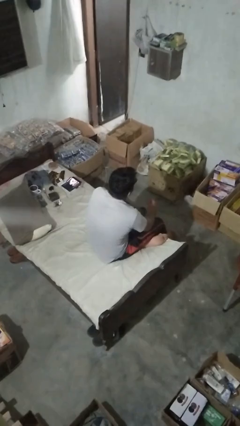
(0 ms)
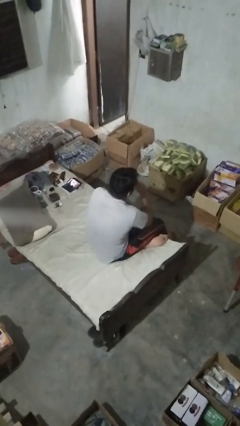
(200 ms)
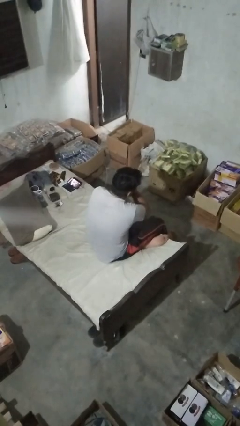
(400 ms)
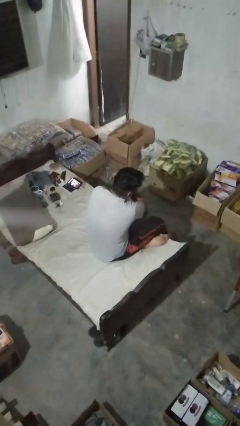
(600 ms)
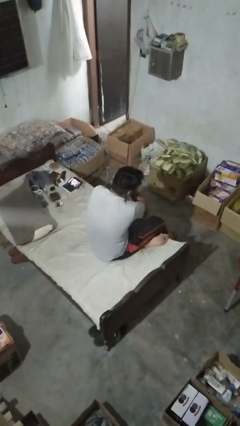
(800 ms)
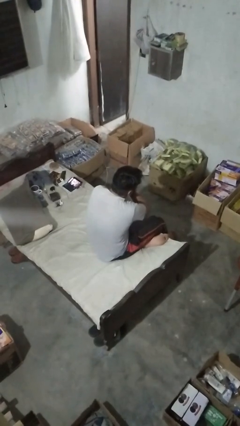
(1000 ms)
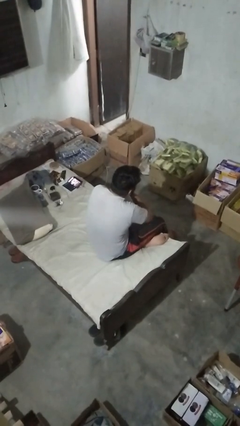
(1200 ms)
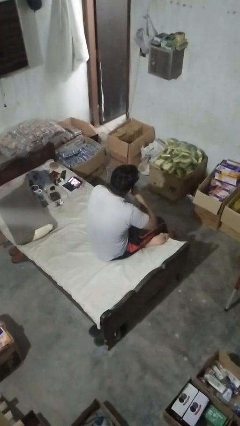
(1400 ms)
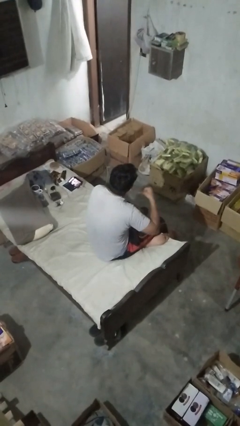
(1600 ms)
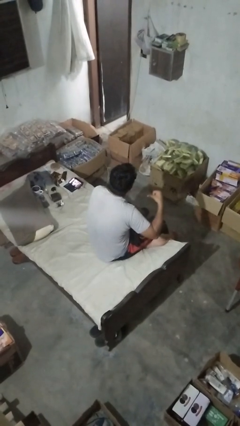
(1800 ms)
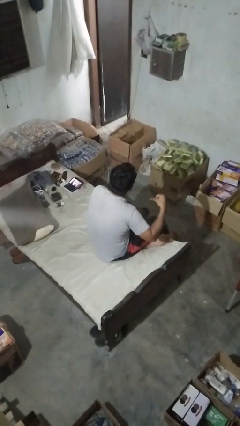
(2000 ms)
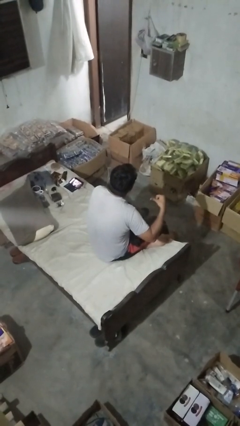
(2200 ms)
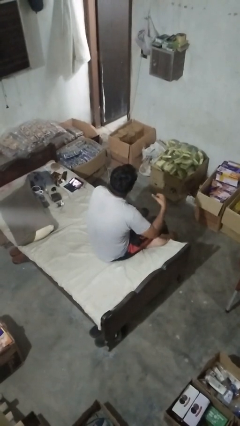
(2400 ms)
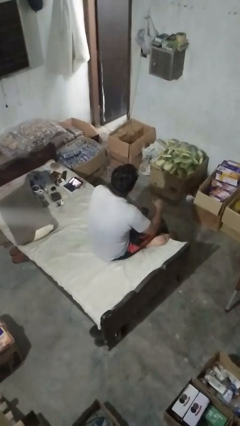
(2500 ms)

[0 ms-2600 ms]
person gestures cut

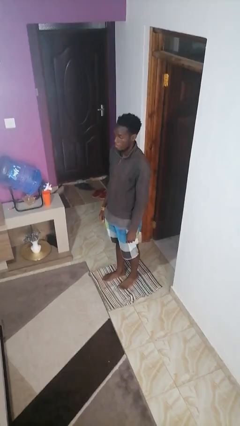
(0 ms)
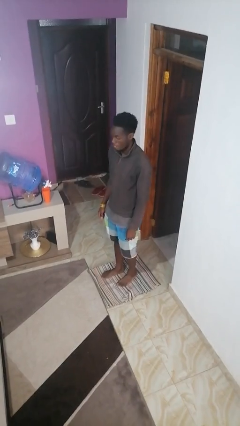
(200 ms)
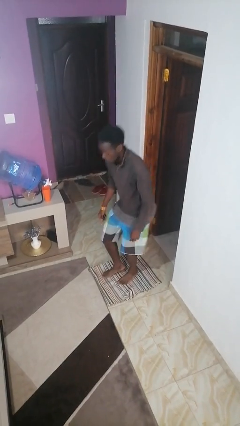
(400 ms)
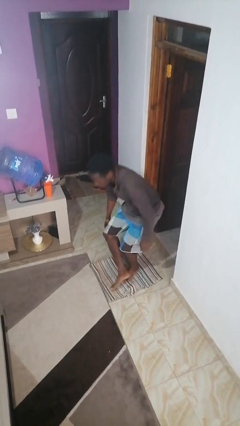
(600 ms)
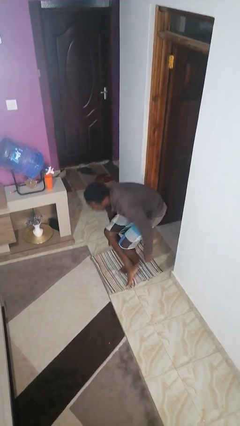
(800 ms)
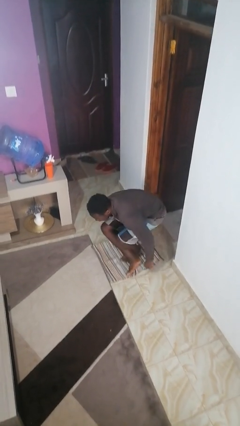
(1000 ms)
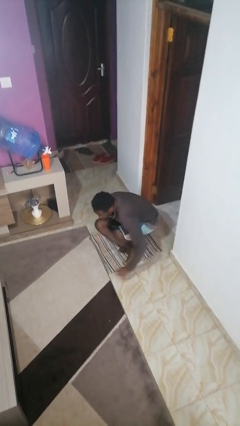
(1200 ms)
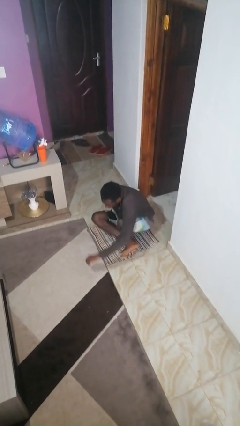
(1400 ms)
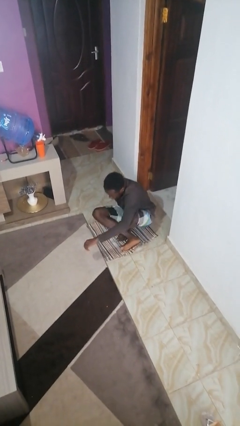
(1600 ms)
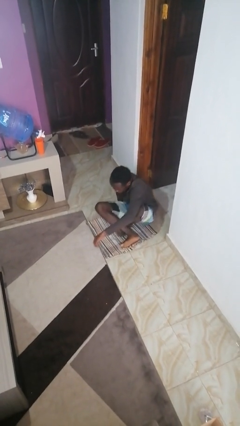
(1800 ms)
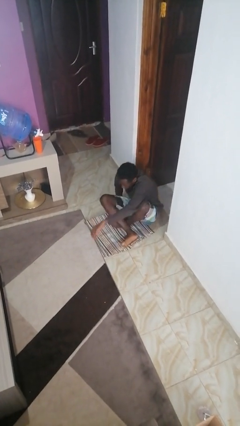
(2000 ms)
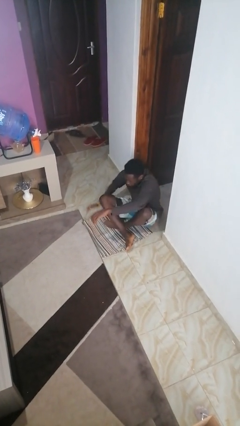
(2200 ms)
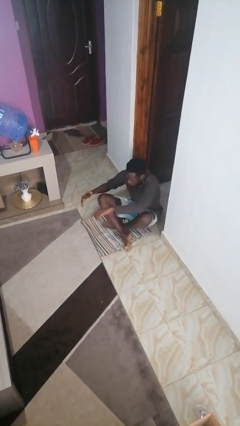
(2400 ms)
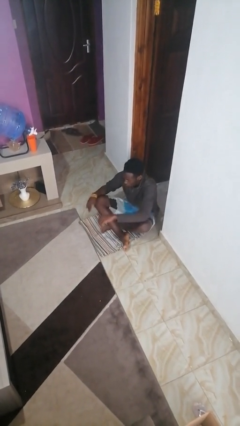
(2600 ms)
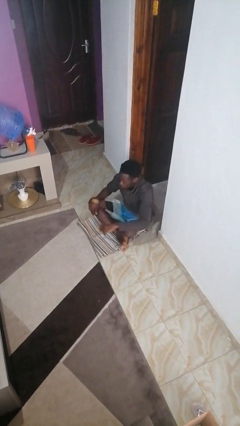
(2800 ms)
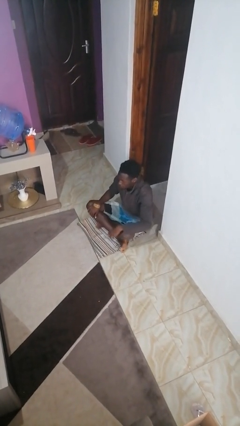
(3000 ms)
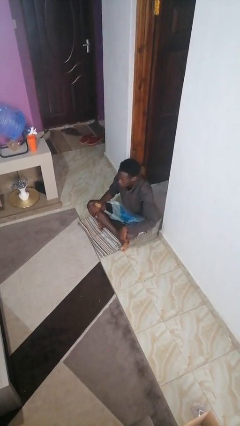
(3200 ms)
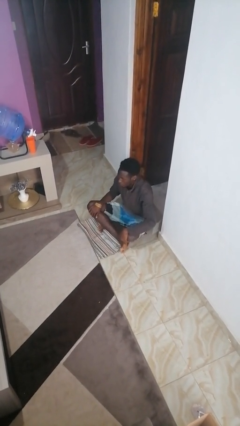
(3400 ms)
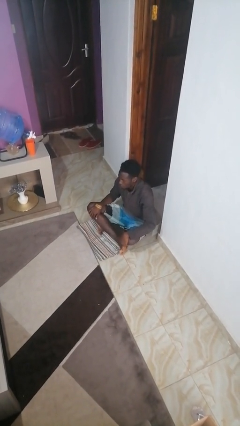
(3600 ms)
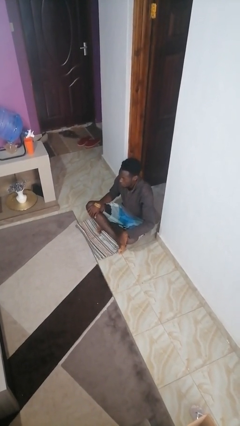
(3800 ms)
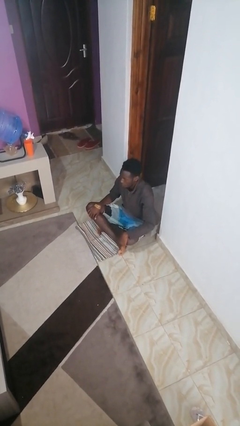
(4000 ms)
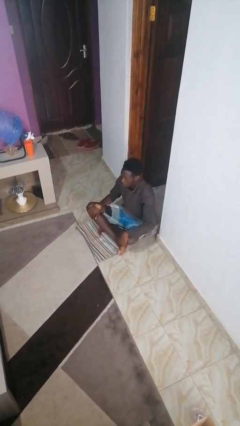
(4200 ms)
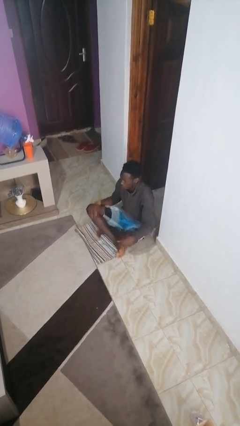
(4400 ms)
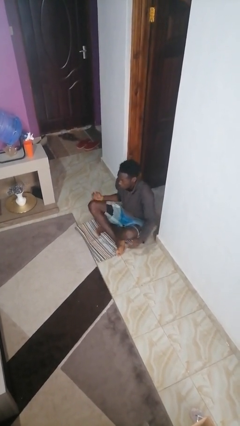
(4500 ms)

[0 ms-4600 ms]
person sits crisscross

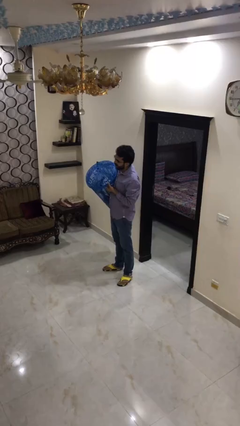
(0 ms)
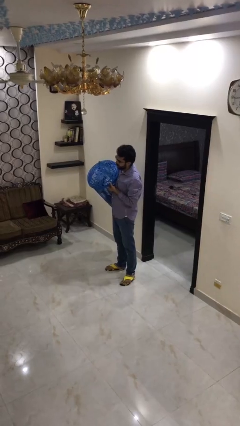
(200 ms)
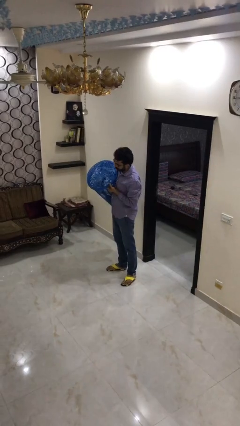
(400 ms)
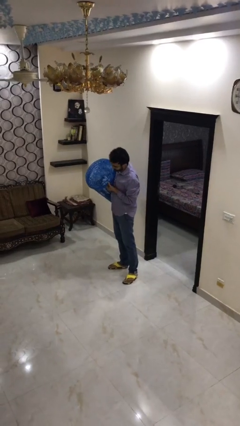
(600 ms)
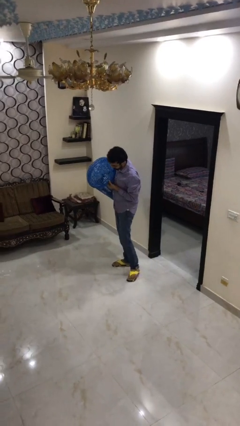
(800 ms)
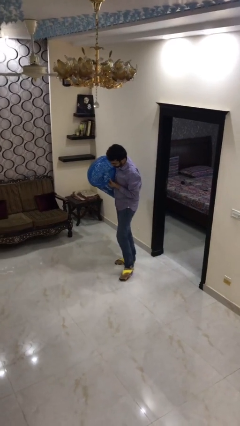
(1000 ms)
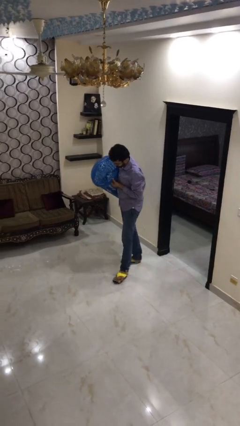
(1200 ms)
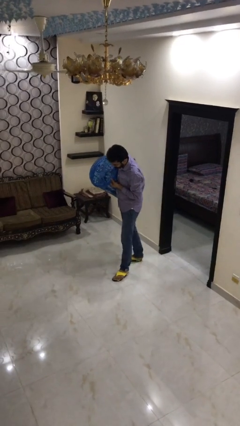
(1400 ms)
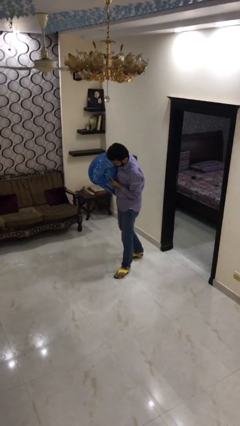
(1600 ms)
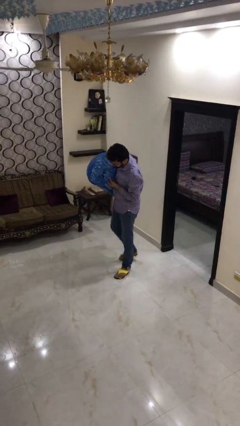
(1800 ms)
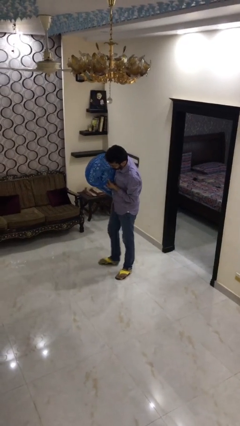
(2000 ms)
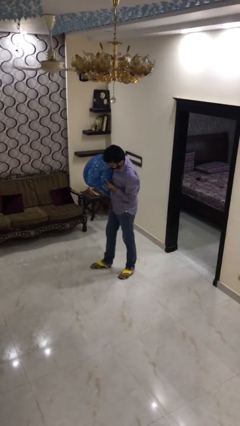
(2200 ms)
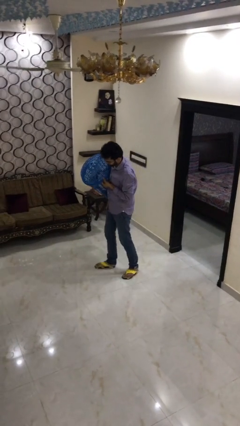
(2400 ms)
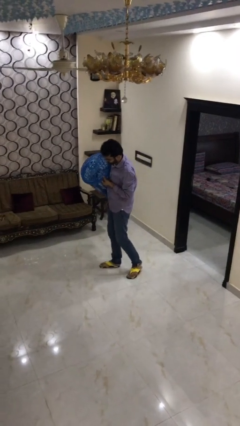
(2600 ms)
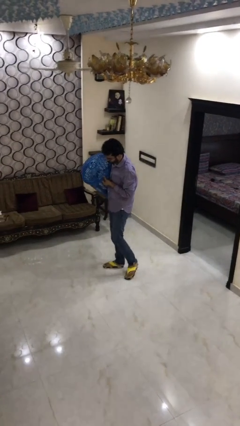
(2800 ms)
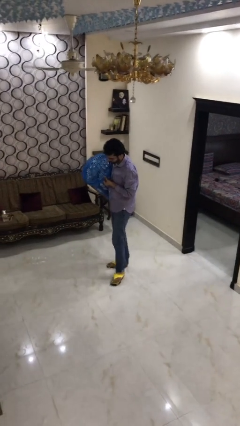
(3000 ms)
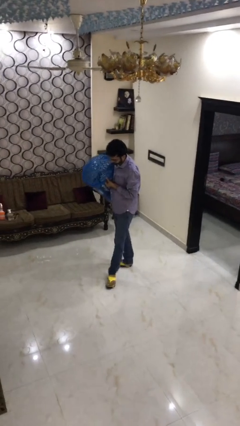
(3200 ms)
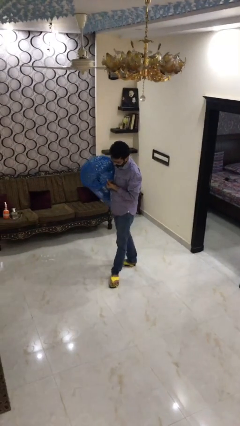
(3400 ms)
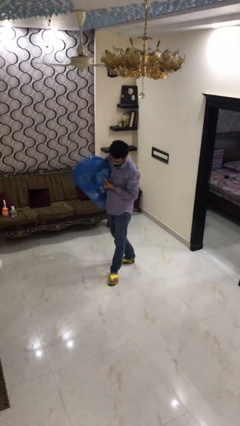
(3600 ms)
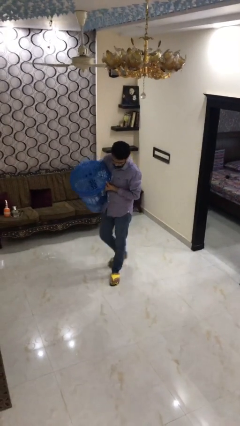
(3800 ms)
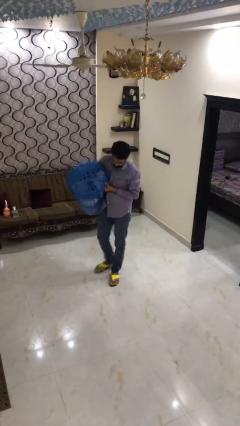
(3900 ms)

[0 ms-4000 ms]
person carries heavy object

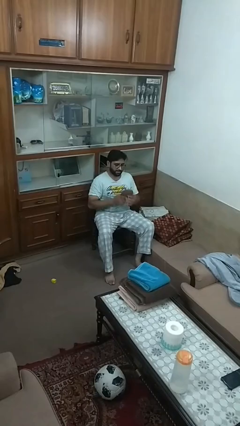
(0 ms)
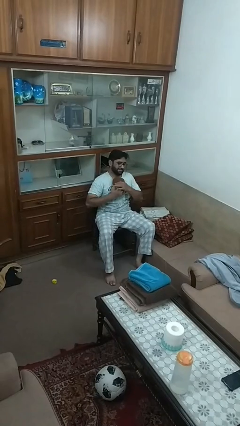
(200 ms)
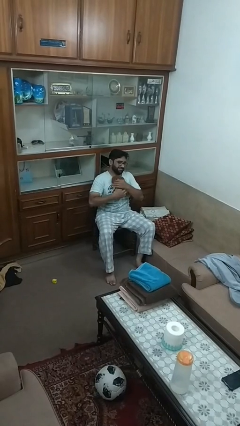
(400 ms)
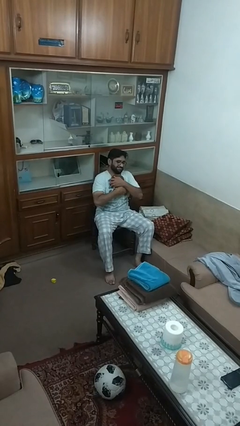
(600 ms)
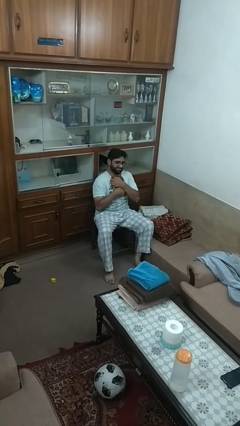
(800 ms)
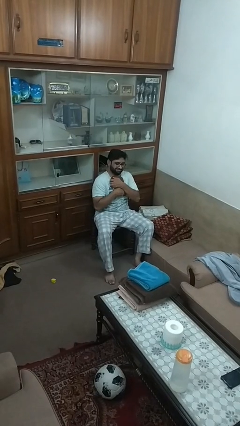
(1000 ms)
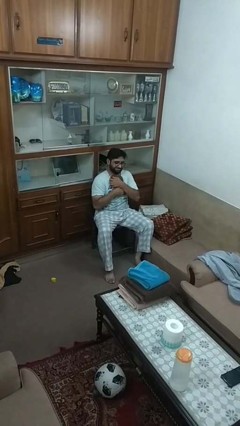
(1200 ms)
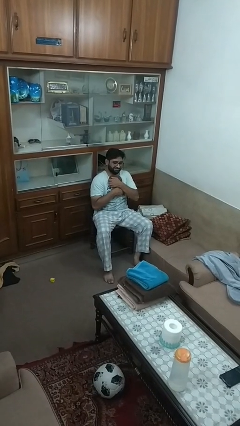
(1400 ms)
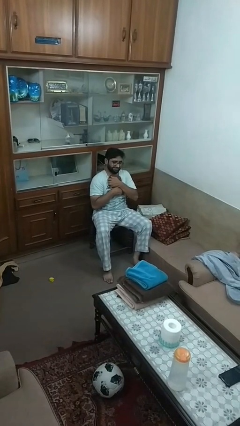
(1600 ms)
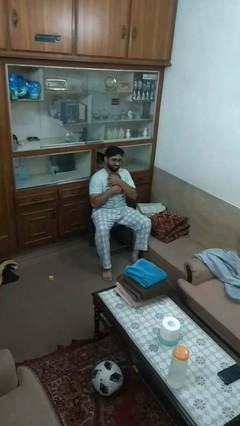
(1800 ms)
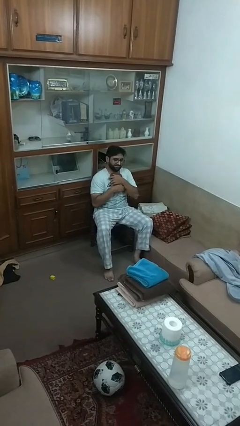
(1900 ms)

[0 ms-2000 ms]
person hugs stuffed animal

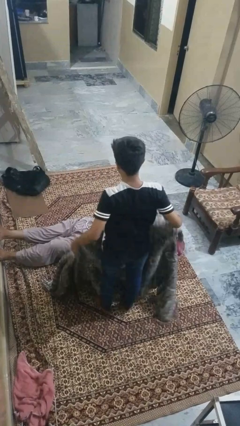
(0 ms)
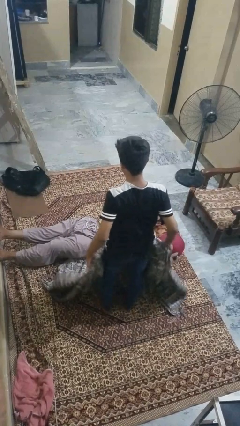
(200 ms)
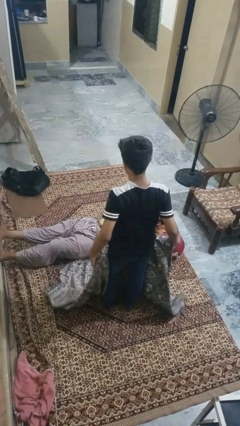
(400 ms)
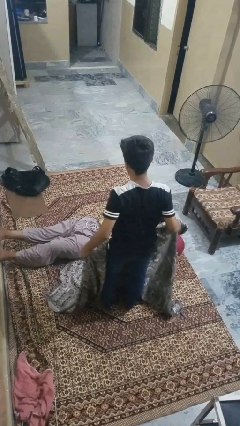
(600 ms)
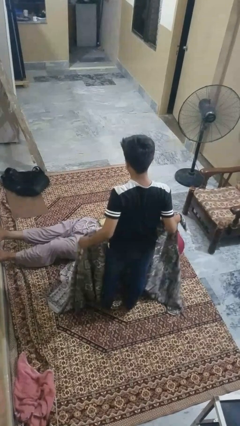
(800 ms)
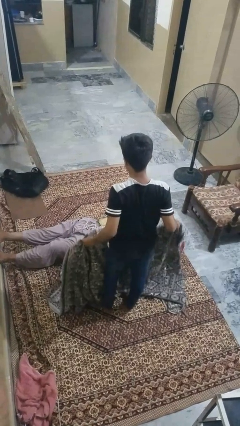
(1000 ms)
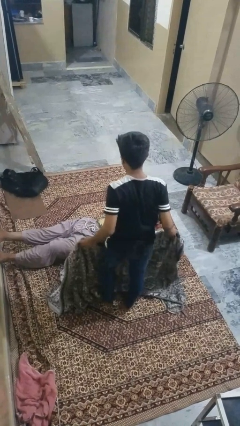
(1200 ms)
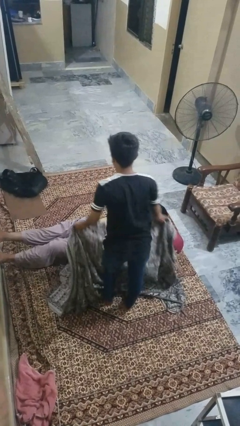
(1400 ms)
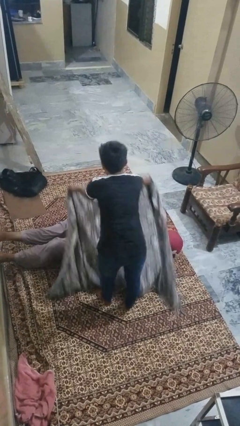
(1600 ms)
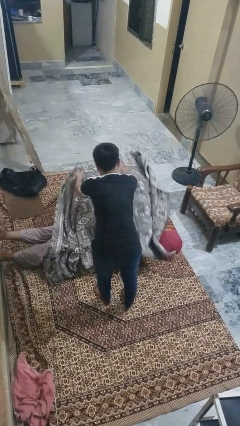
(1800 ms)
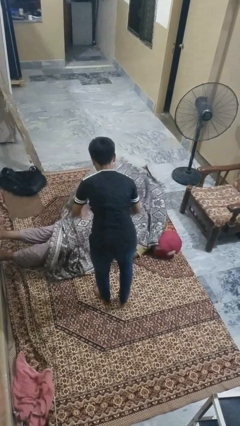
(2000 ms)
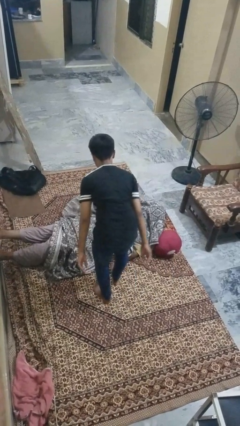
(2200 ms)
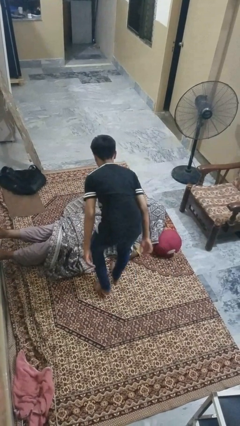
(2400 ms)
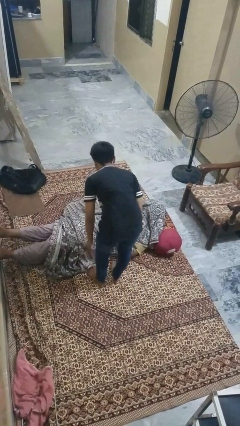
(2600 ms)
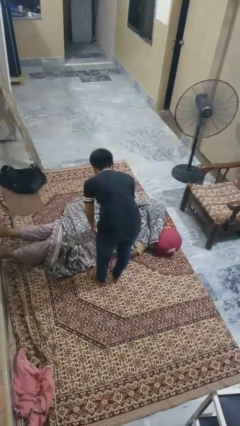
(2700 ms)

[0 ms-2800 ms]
person covers friend with blanket

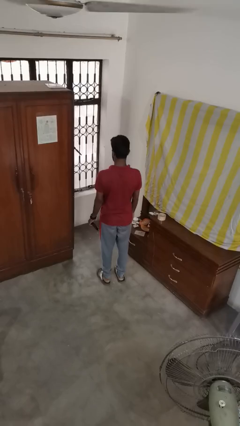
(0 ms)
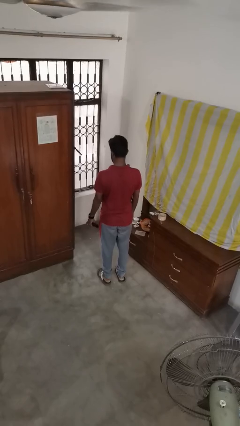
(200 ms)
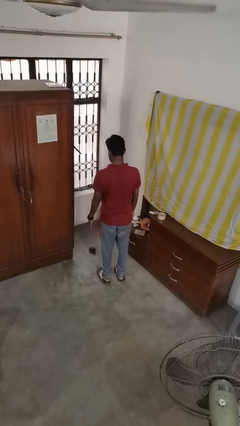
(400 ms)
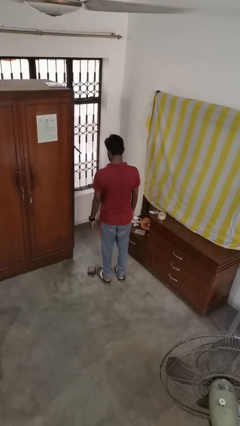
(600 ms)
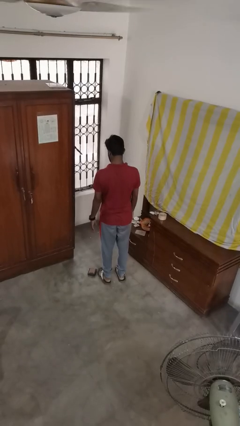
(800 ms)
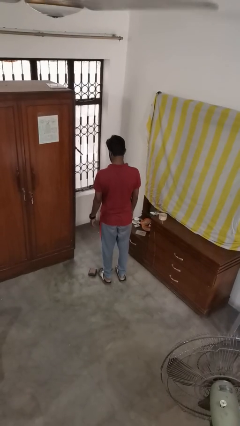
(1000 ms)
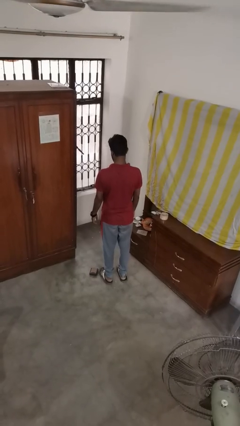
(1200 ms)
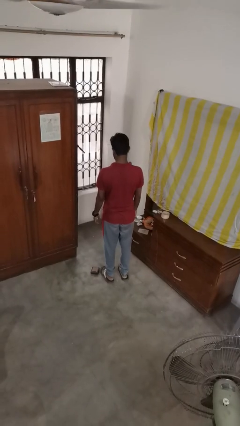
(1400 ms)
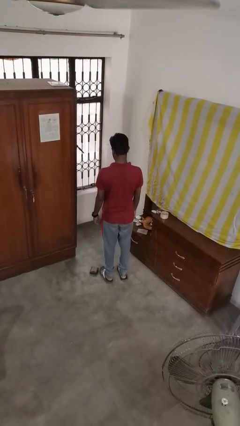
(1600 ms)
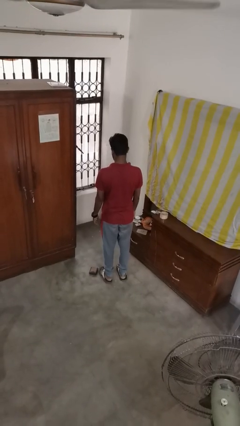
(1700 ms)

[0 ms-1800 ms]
person throws object to ground
